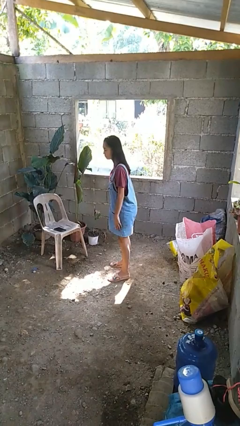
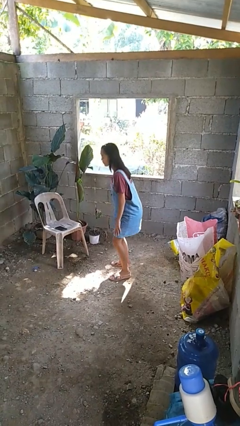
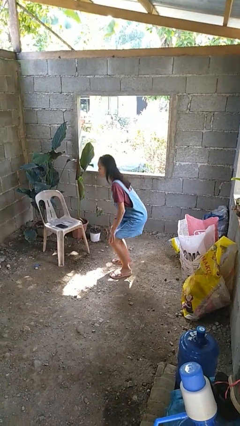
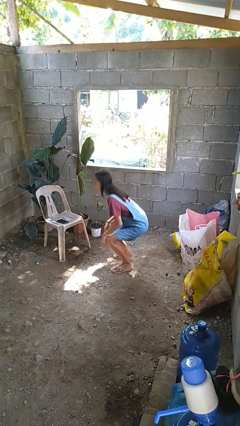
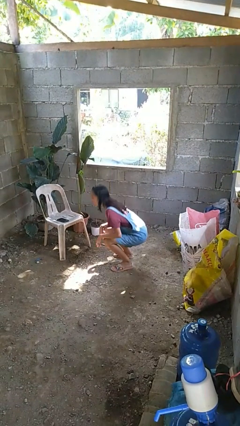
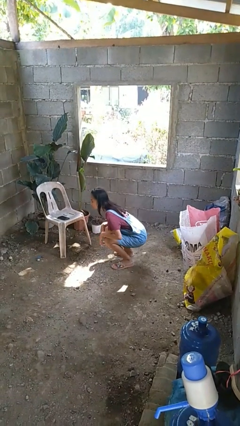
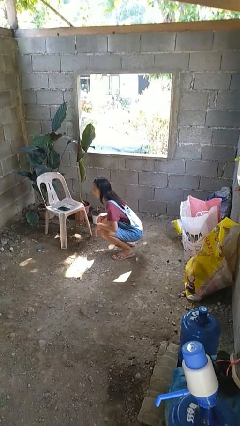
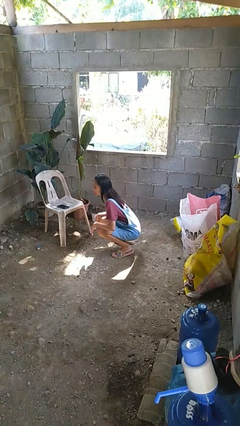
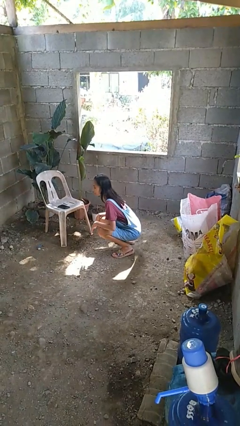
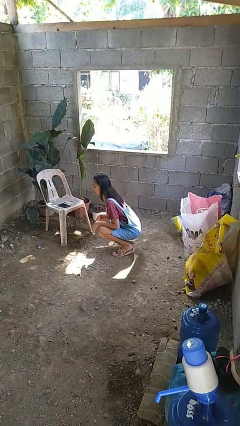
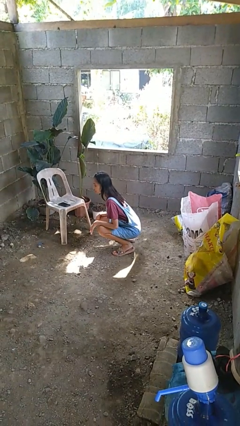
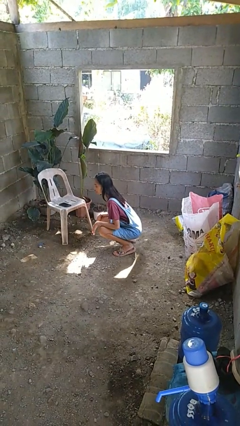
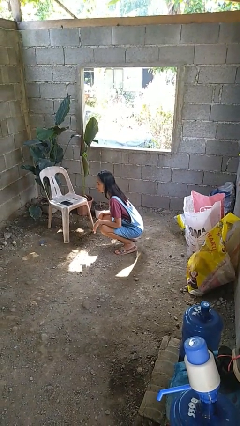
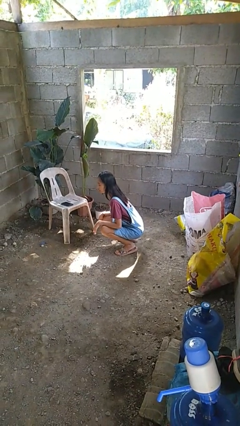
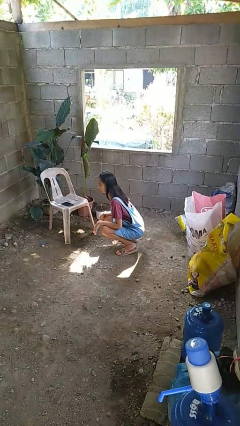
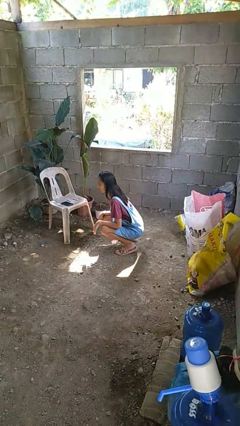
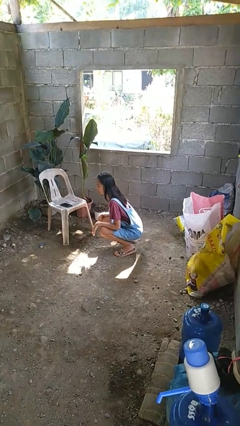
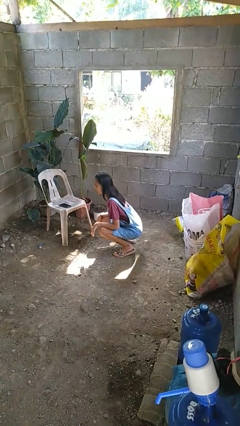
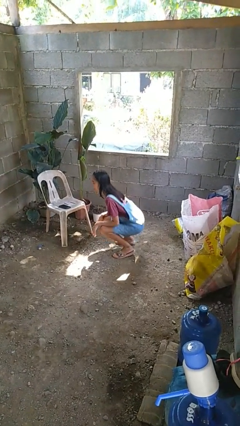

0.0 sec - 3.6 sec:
person squats

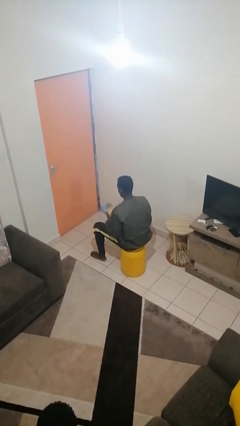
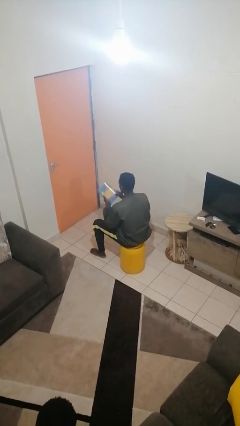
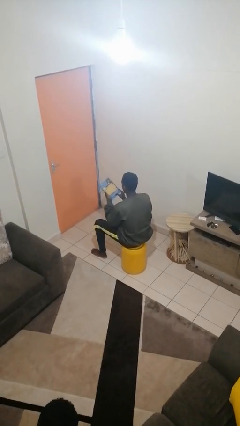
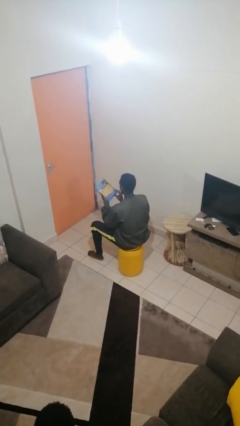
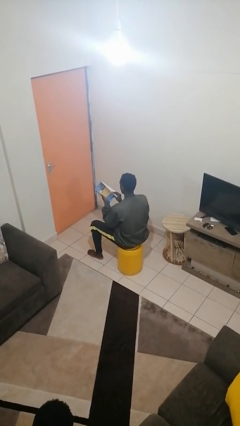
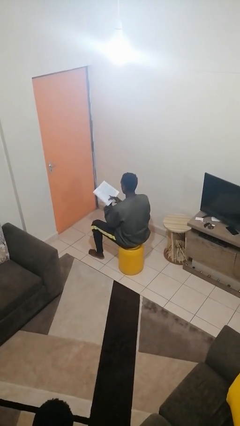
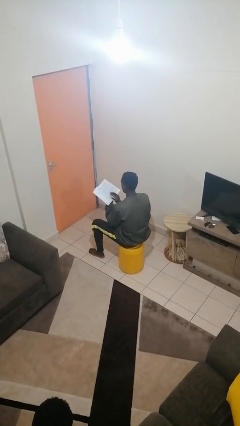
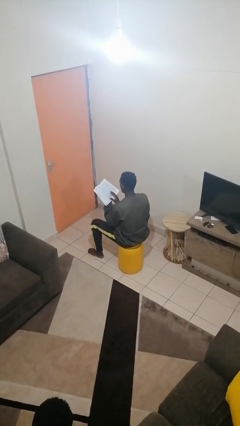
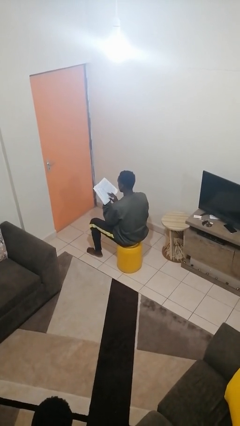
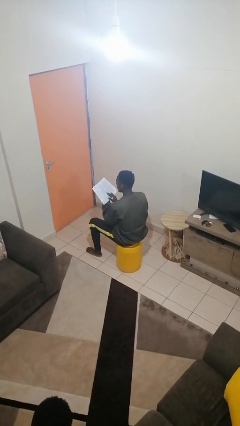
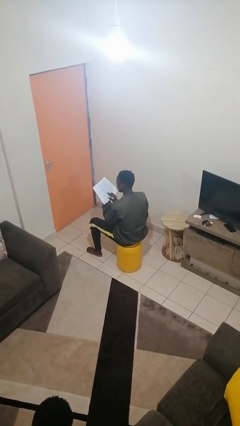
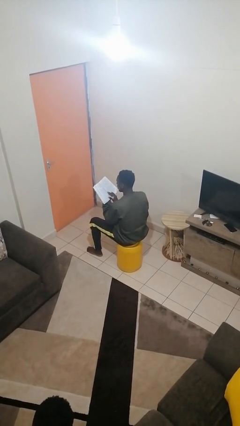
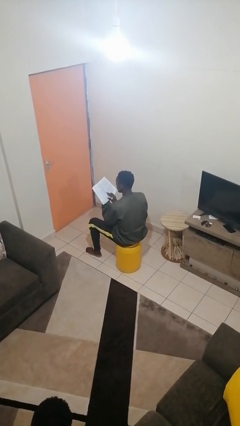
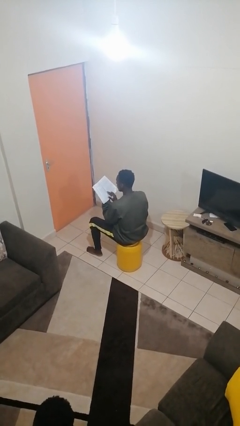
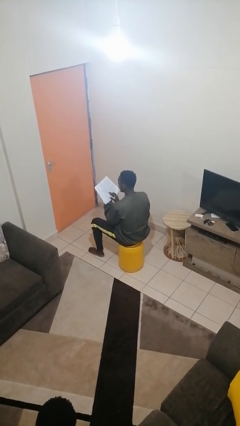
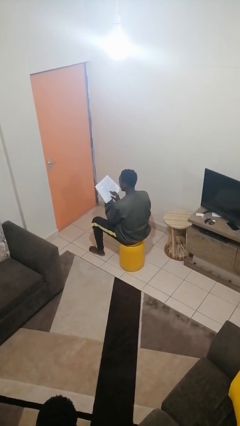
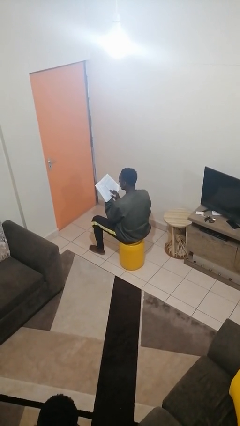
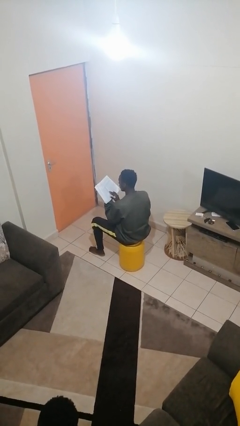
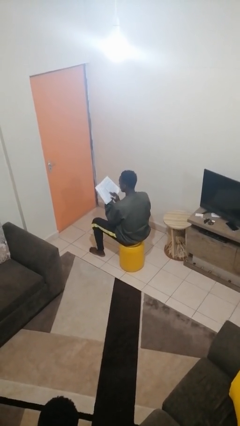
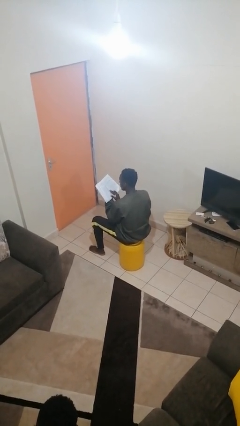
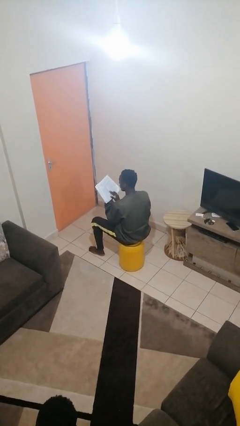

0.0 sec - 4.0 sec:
person reads book

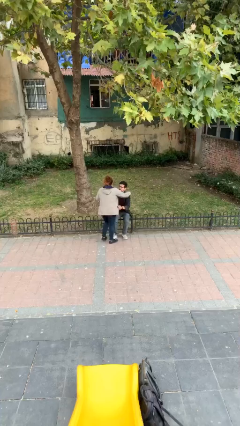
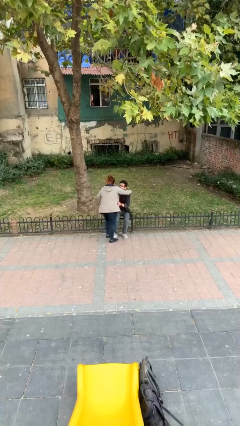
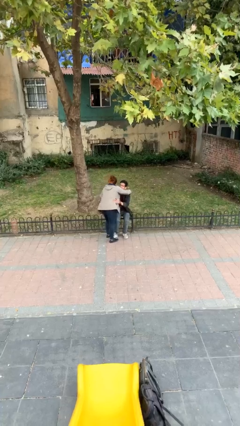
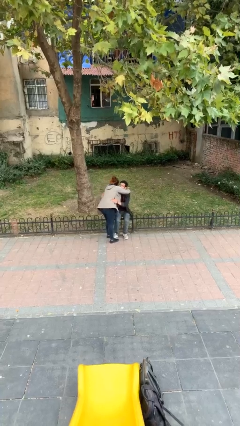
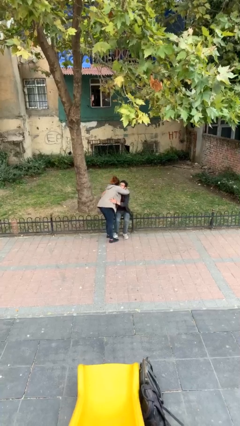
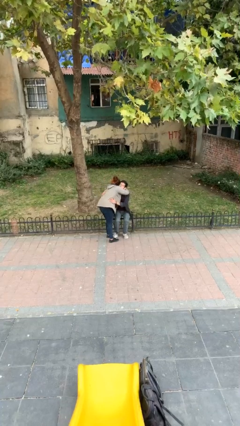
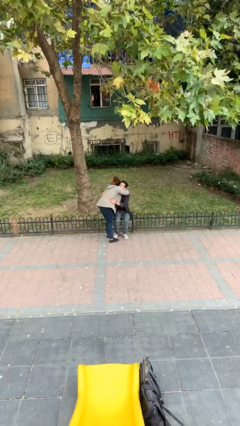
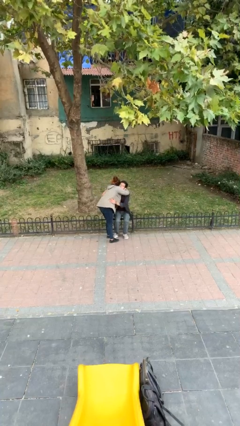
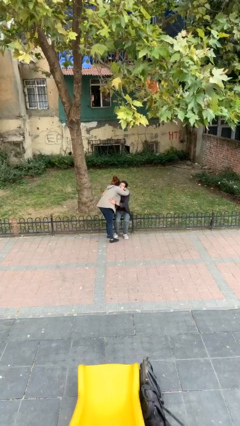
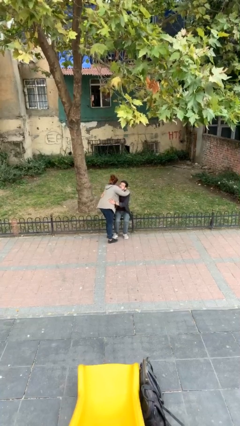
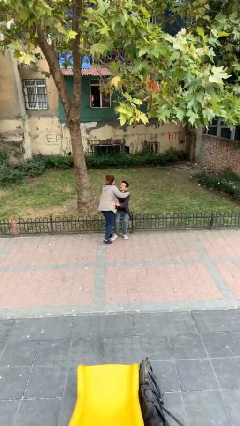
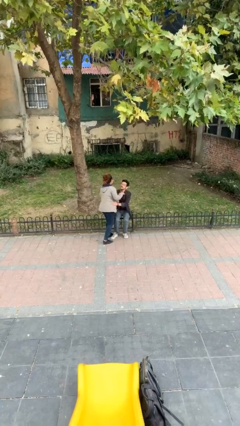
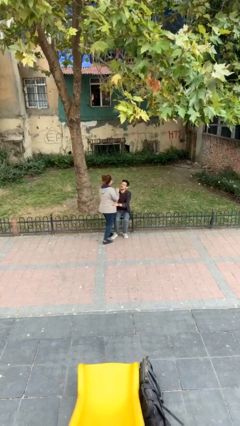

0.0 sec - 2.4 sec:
person embraces person

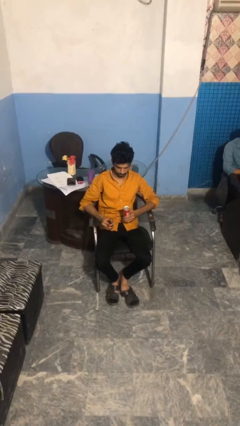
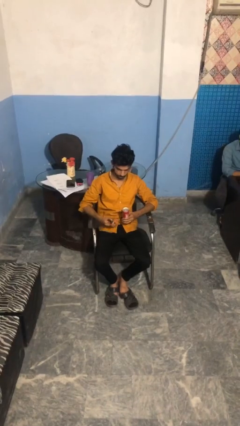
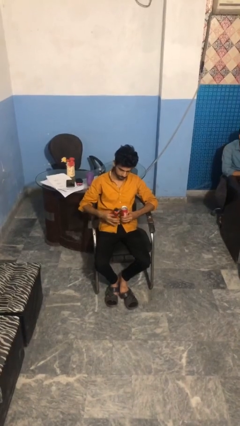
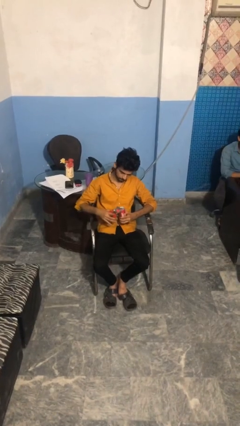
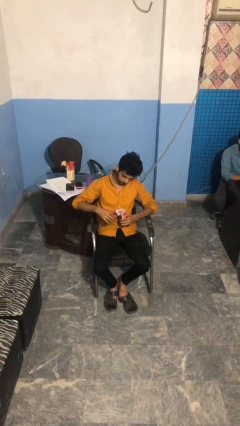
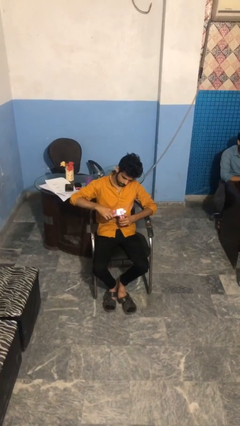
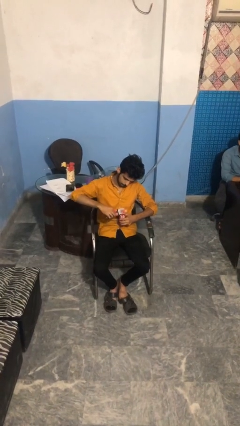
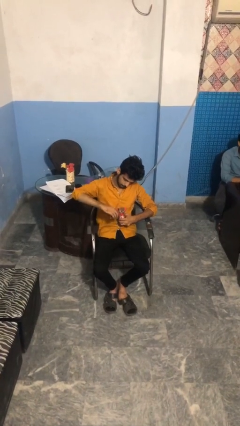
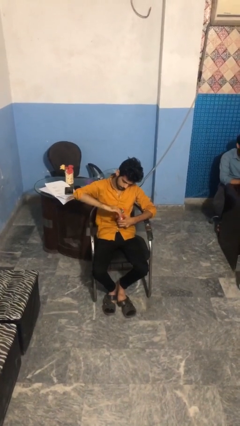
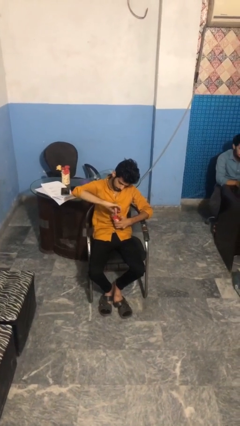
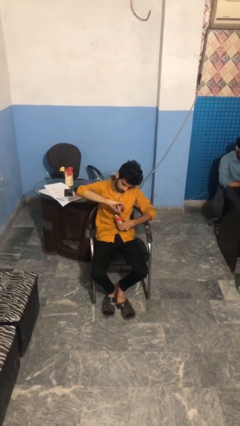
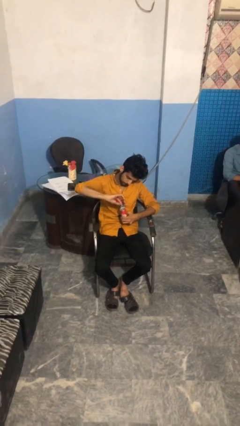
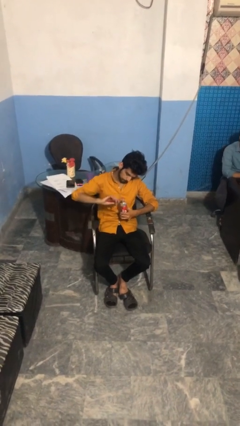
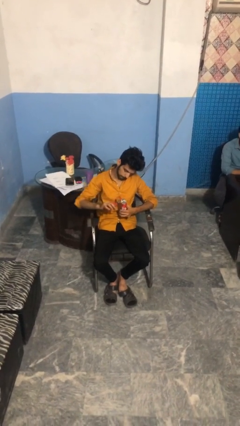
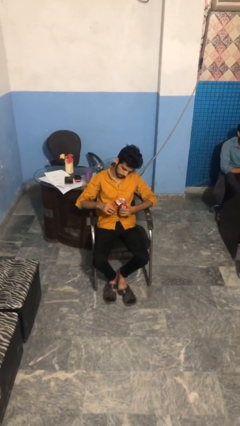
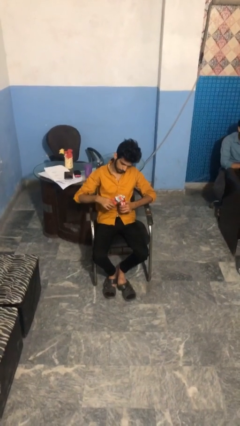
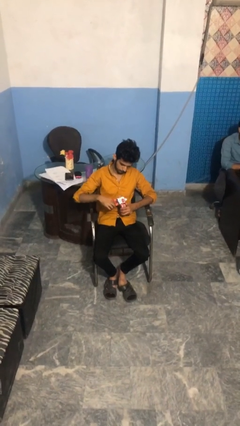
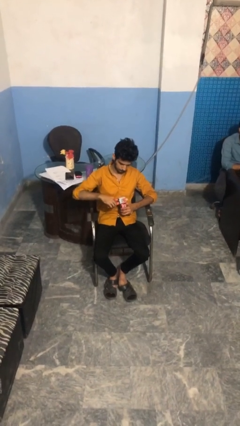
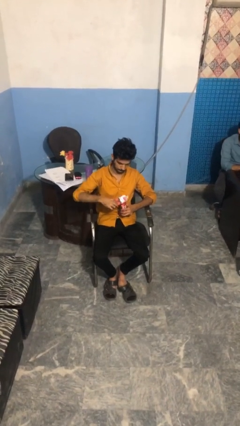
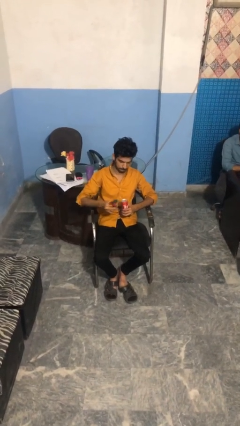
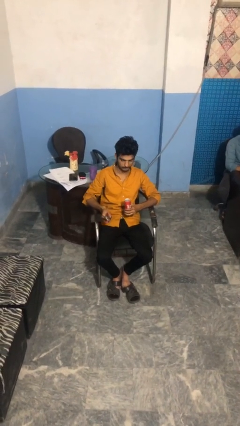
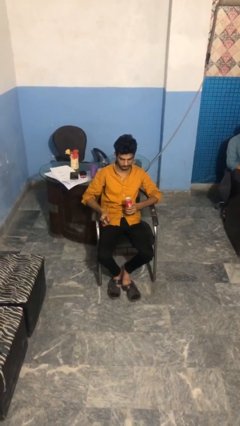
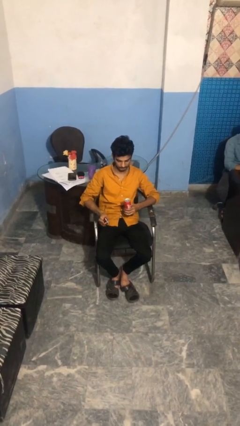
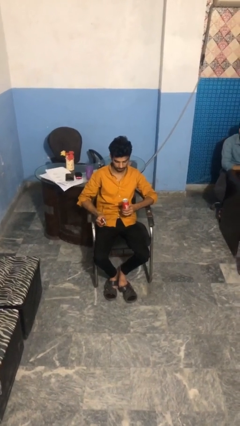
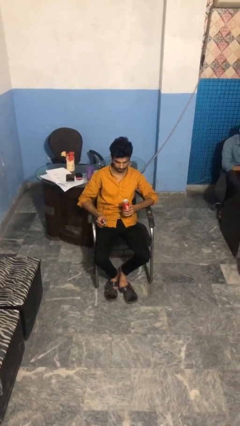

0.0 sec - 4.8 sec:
person opens can with can opener

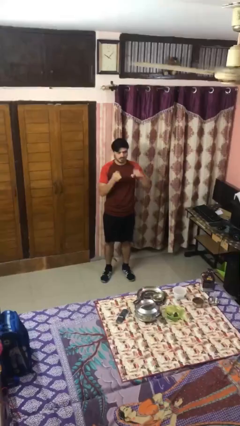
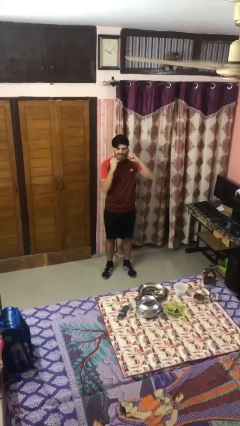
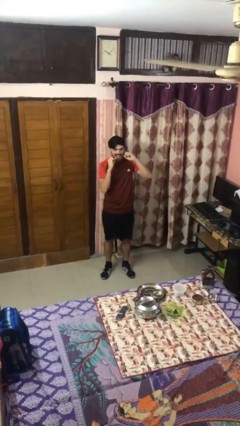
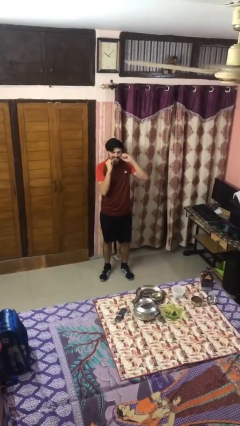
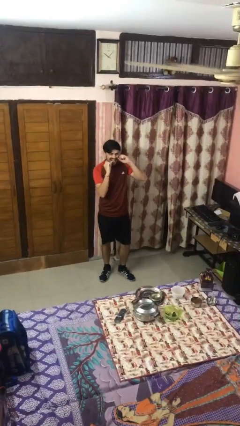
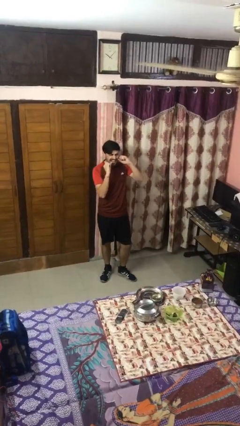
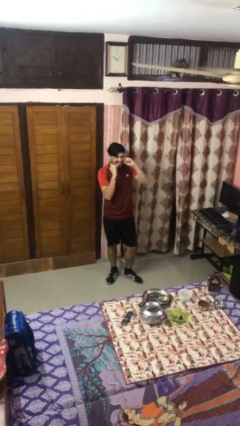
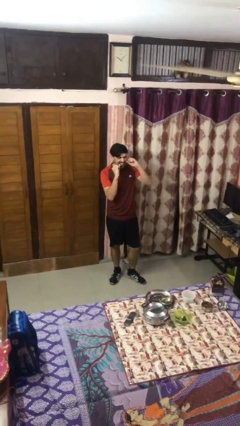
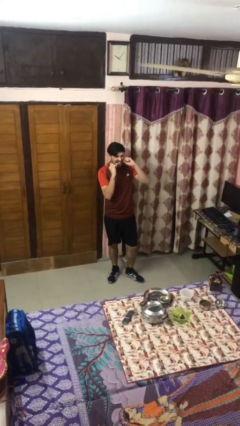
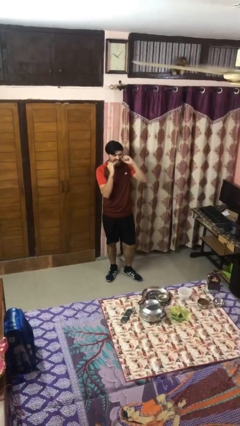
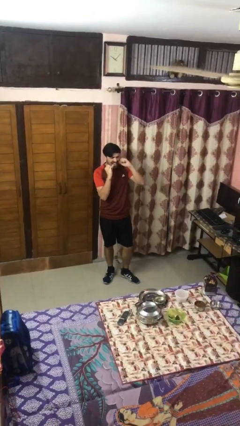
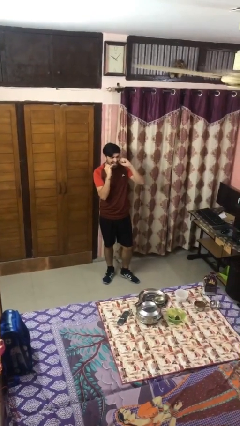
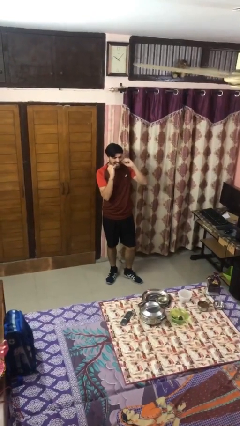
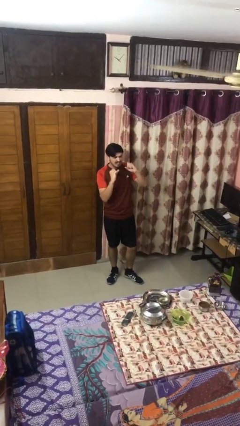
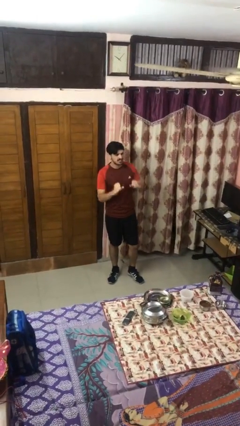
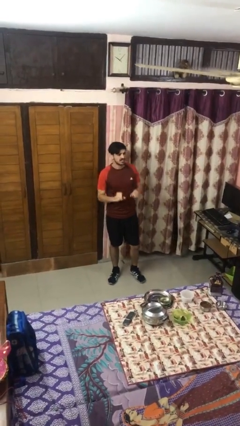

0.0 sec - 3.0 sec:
person flosses

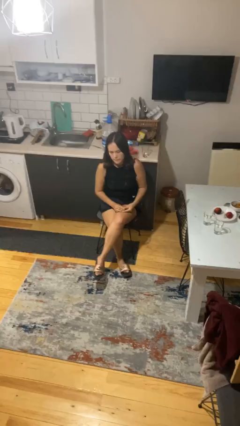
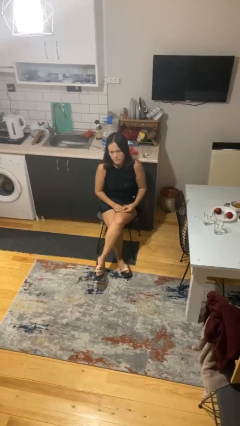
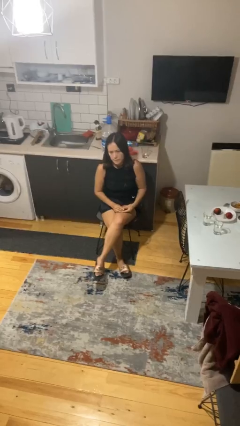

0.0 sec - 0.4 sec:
person takes off ring
